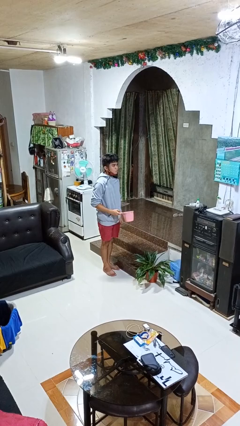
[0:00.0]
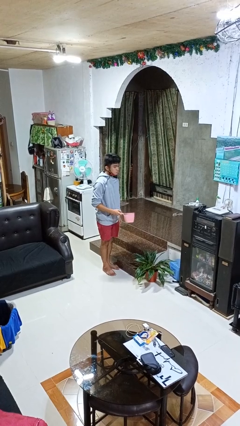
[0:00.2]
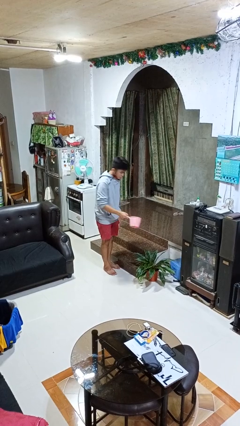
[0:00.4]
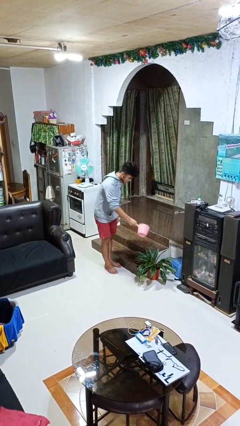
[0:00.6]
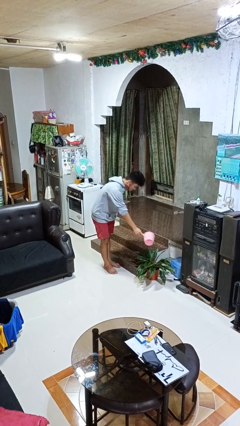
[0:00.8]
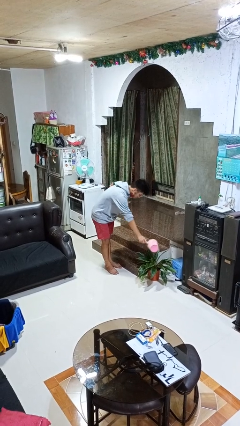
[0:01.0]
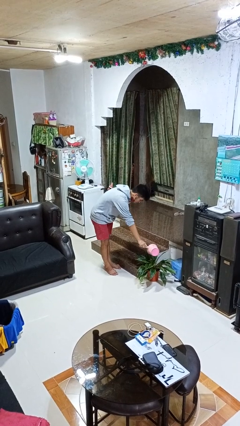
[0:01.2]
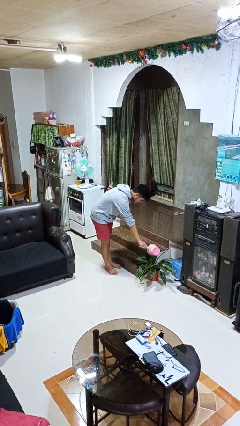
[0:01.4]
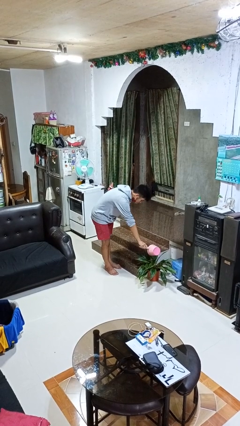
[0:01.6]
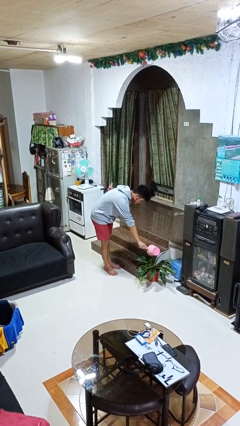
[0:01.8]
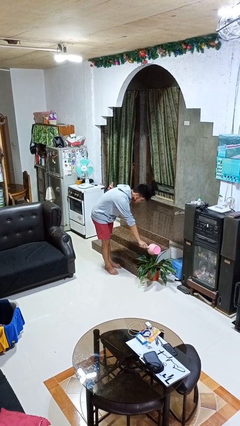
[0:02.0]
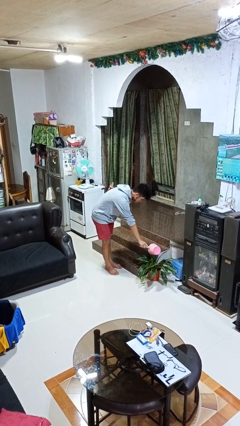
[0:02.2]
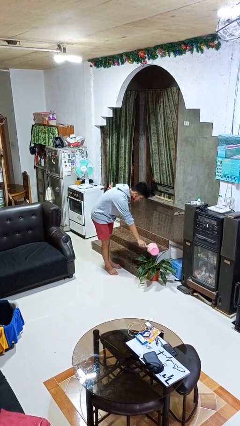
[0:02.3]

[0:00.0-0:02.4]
person waters houseplant

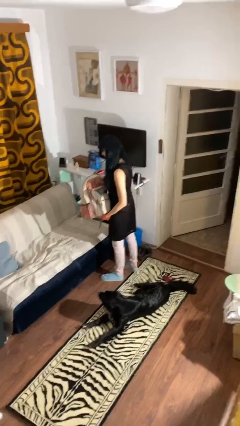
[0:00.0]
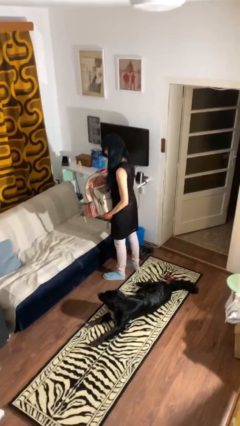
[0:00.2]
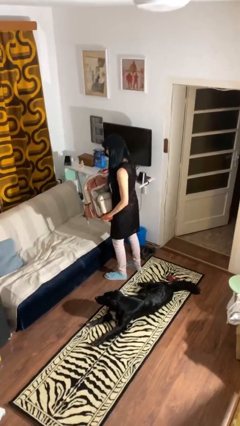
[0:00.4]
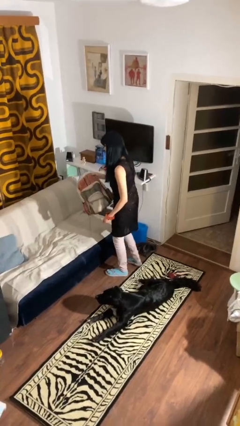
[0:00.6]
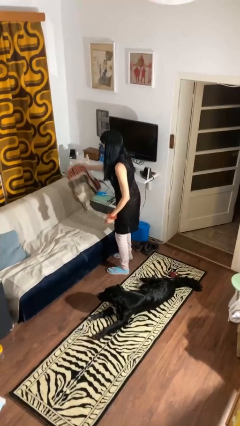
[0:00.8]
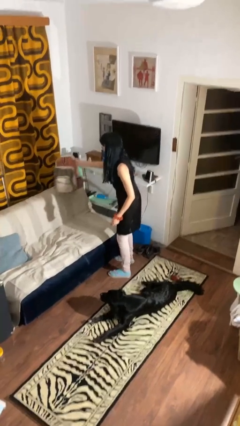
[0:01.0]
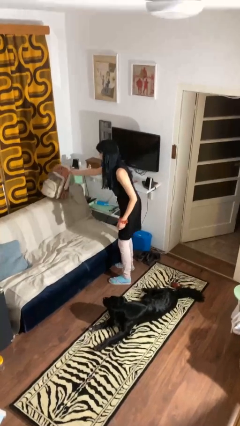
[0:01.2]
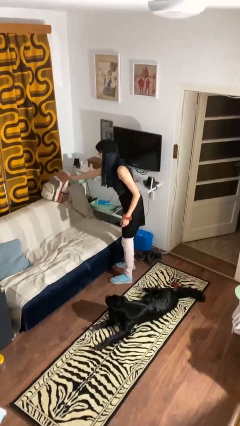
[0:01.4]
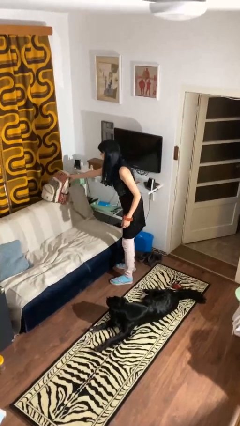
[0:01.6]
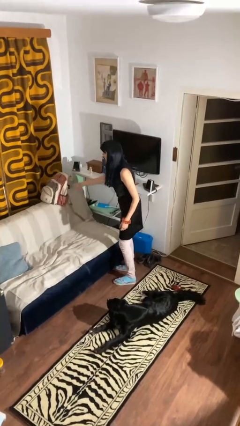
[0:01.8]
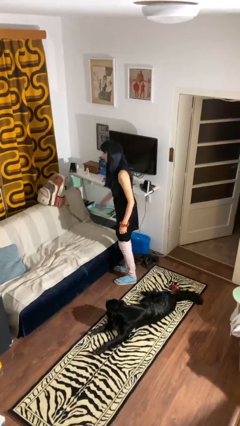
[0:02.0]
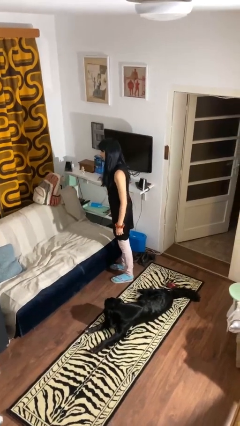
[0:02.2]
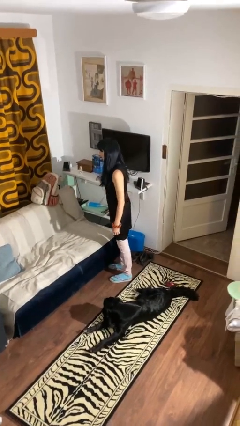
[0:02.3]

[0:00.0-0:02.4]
person puts down object on couch

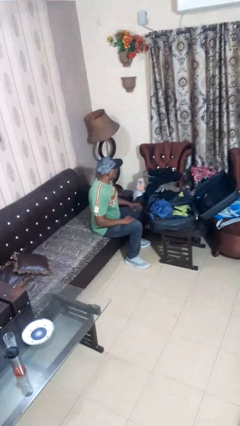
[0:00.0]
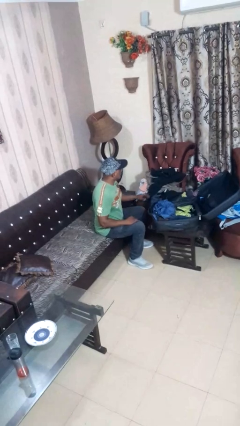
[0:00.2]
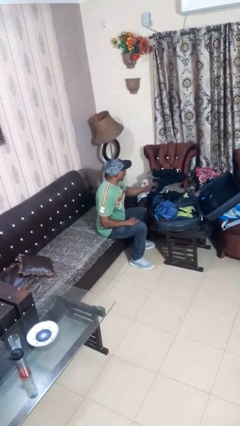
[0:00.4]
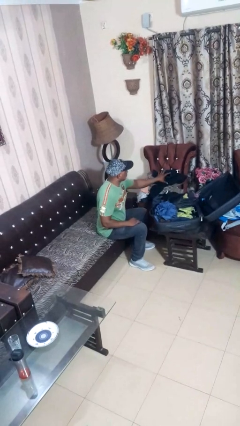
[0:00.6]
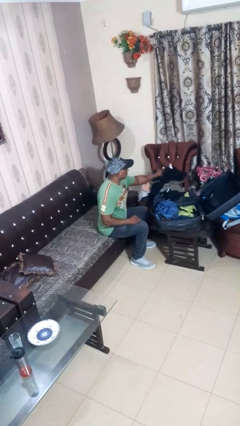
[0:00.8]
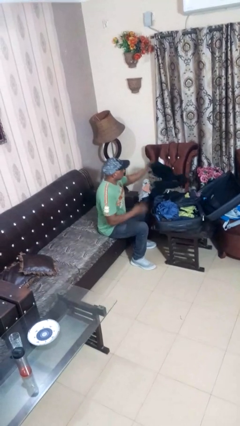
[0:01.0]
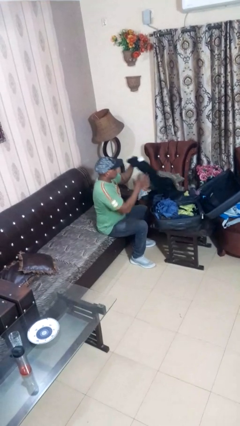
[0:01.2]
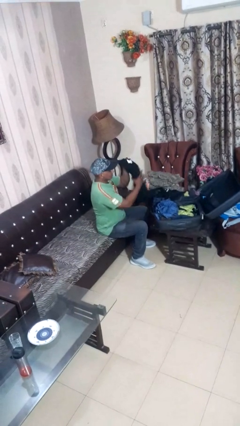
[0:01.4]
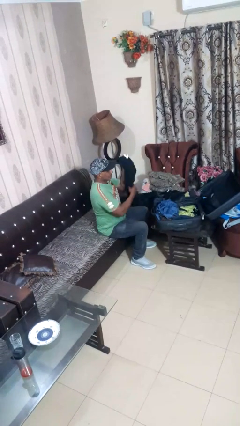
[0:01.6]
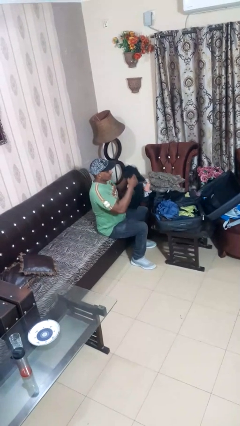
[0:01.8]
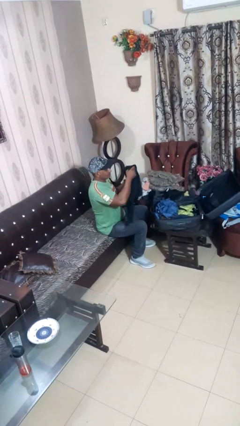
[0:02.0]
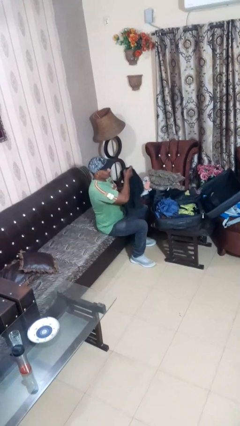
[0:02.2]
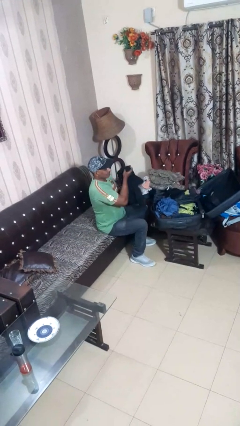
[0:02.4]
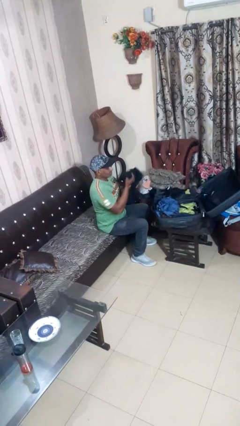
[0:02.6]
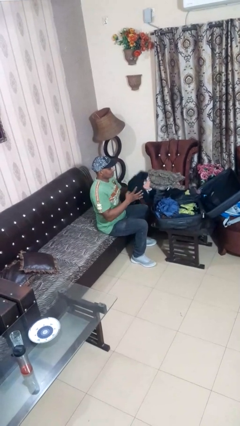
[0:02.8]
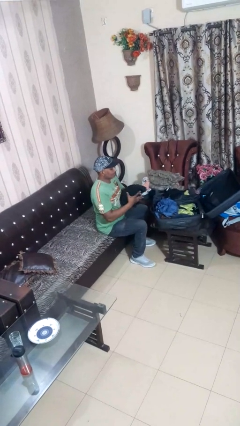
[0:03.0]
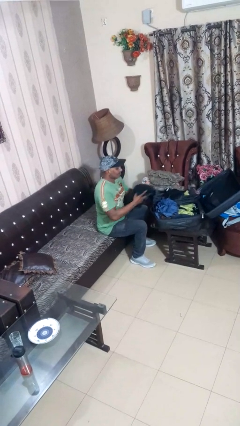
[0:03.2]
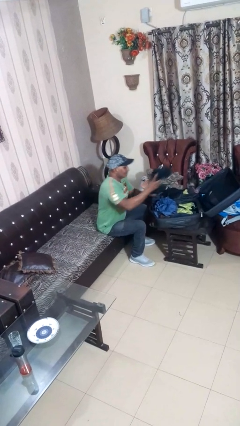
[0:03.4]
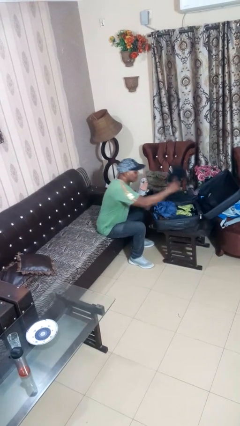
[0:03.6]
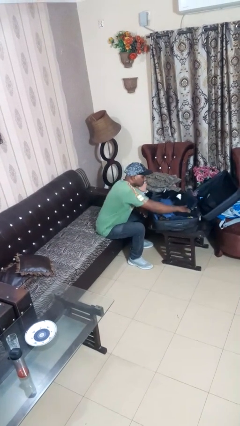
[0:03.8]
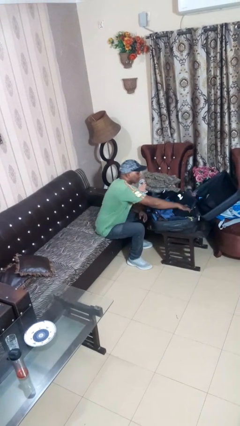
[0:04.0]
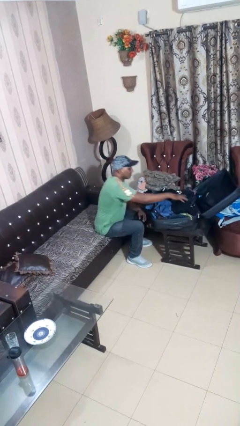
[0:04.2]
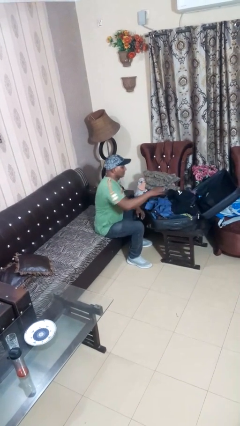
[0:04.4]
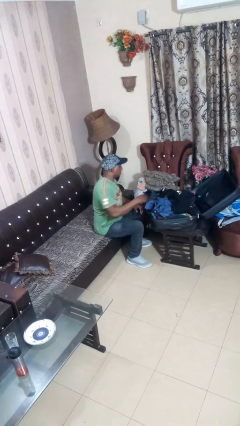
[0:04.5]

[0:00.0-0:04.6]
person loads clothes into suitcase

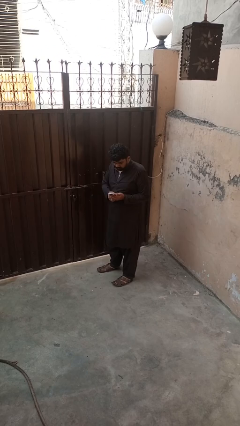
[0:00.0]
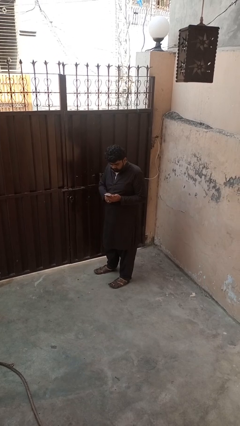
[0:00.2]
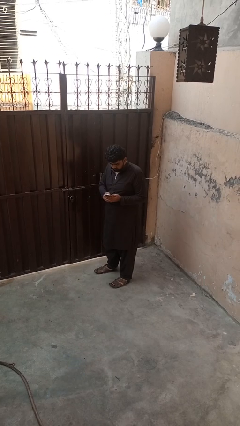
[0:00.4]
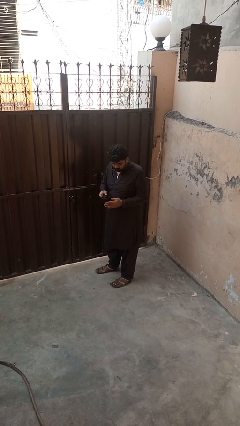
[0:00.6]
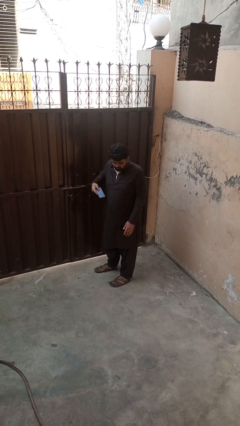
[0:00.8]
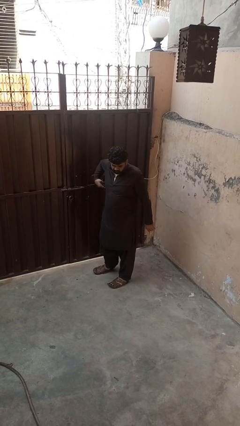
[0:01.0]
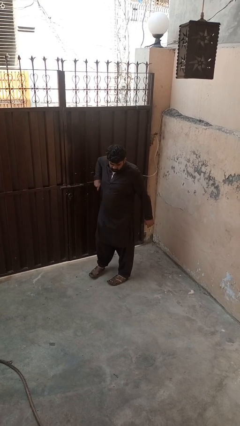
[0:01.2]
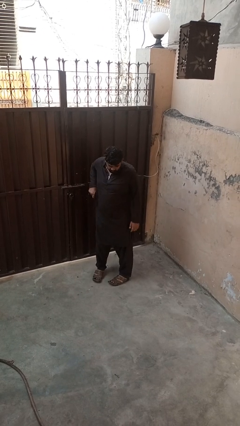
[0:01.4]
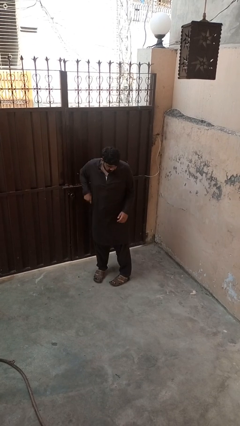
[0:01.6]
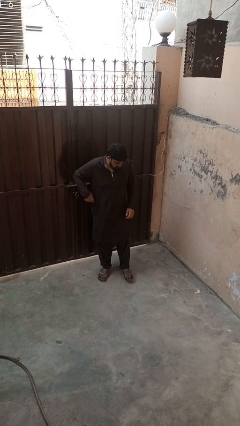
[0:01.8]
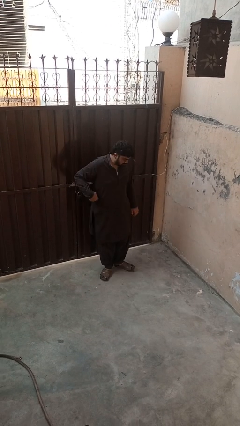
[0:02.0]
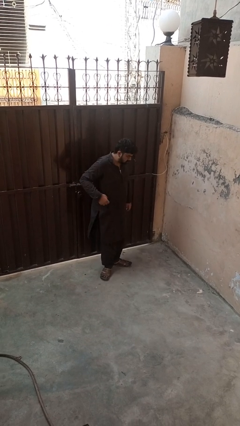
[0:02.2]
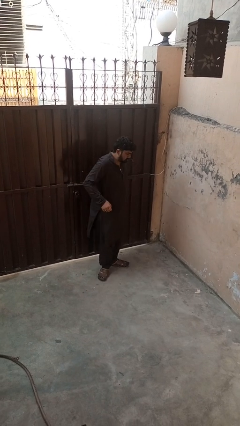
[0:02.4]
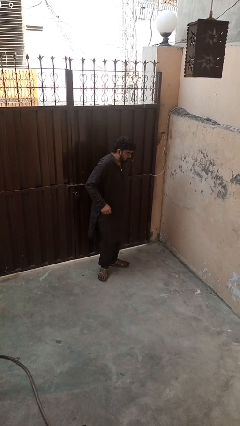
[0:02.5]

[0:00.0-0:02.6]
person puts phone into pocket

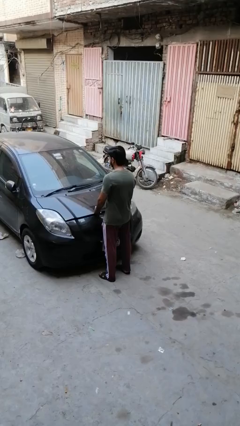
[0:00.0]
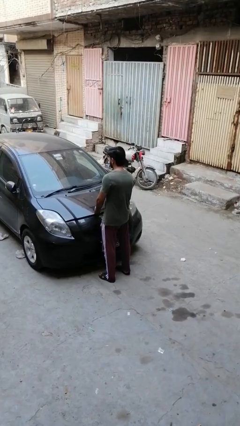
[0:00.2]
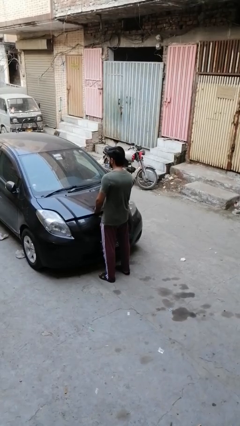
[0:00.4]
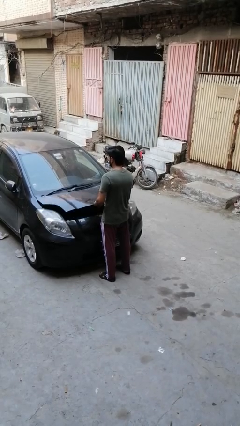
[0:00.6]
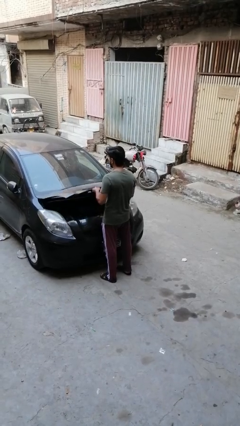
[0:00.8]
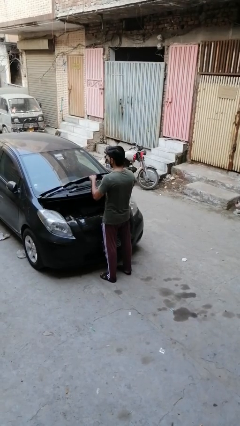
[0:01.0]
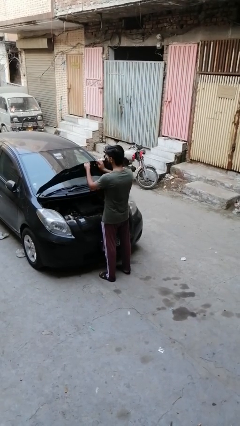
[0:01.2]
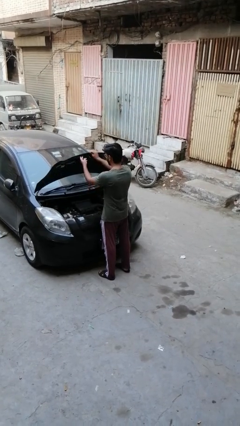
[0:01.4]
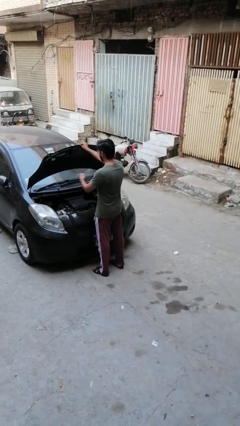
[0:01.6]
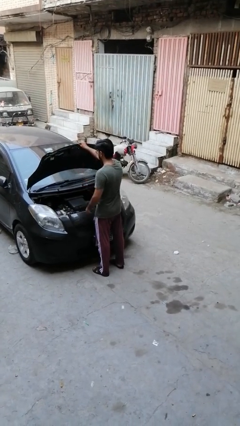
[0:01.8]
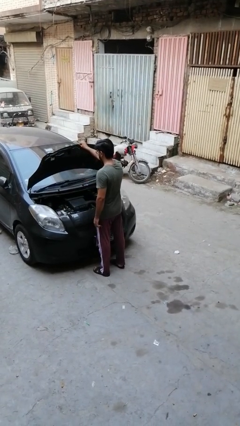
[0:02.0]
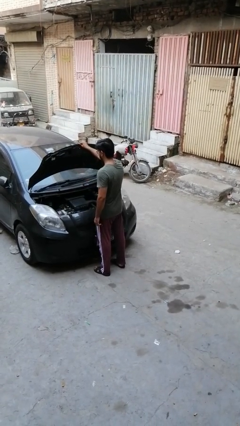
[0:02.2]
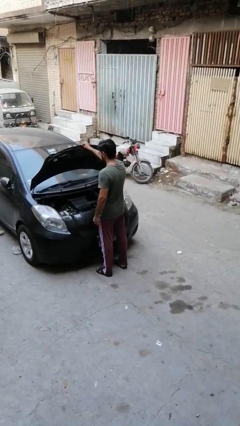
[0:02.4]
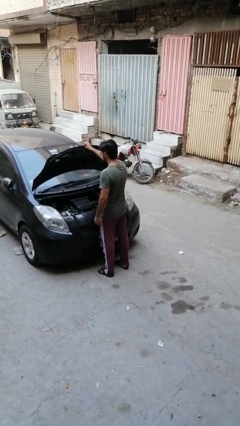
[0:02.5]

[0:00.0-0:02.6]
person opens car hood

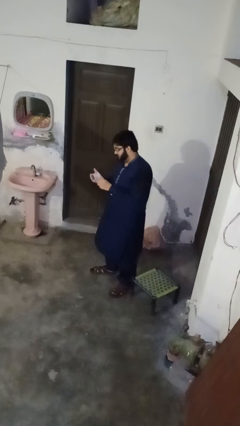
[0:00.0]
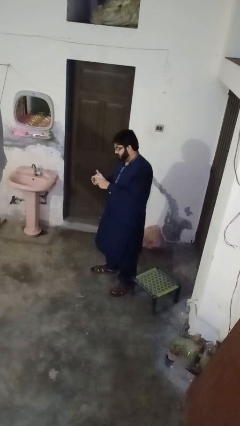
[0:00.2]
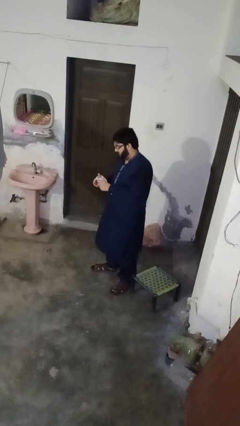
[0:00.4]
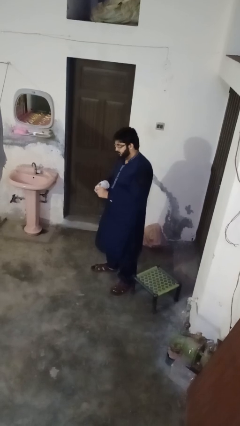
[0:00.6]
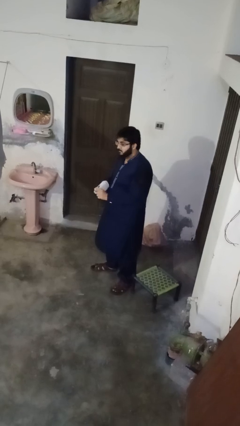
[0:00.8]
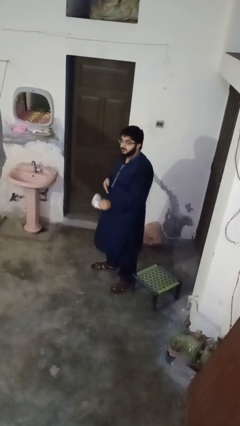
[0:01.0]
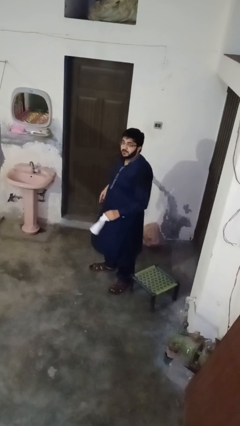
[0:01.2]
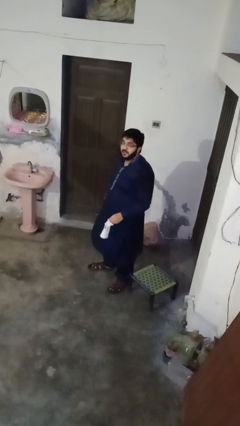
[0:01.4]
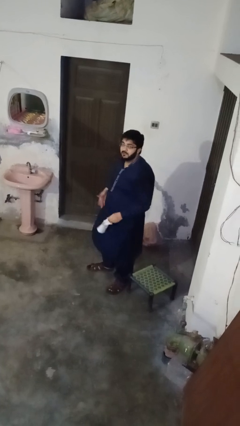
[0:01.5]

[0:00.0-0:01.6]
person takes off gloves

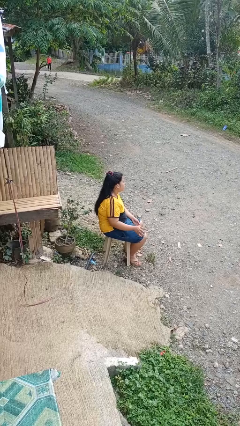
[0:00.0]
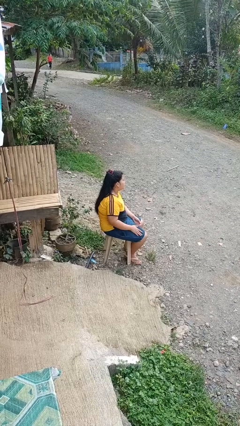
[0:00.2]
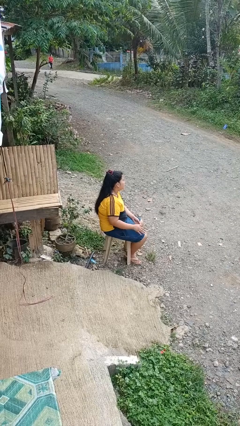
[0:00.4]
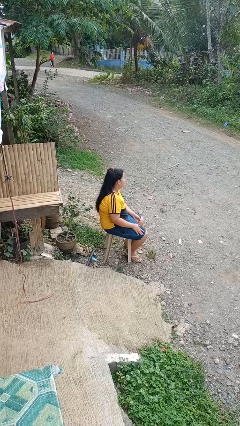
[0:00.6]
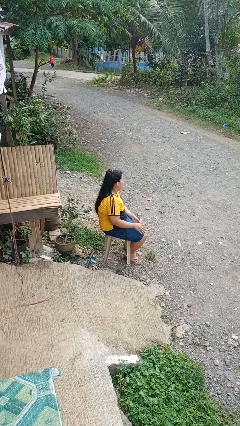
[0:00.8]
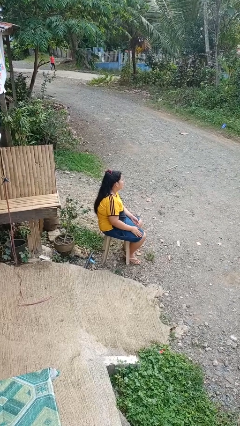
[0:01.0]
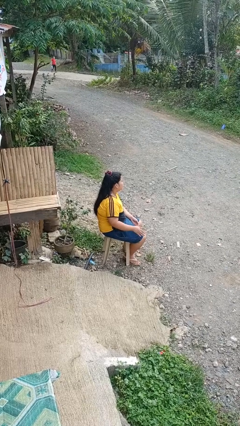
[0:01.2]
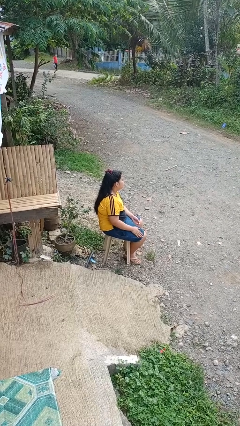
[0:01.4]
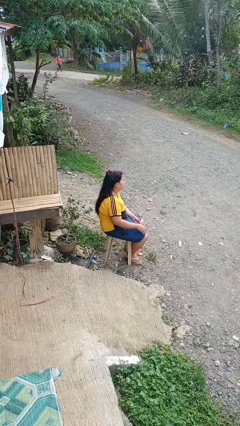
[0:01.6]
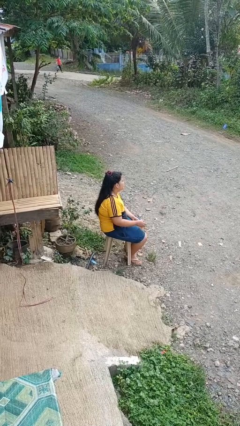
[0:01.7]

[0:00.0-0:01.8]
person slaps hands on thighs
